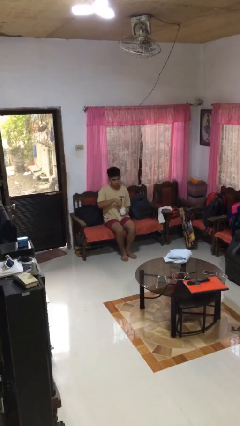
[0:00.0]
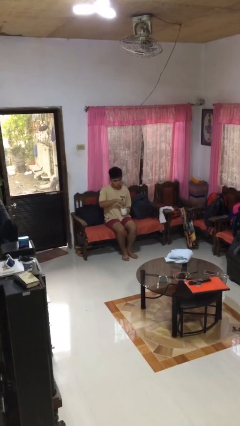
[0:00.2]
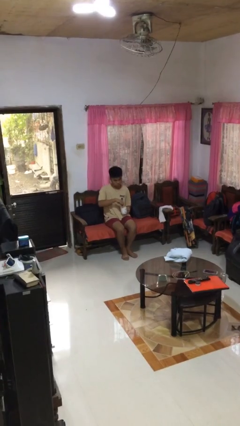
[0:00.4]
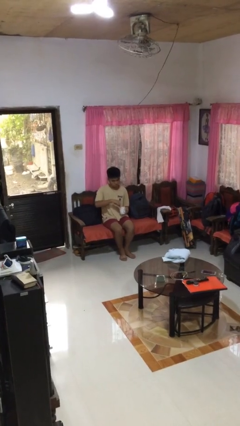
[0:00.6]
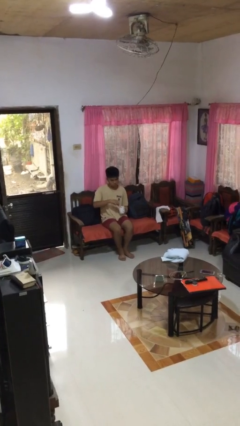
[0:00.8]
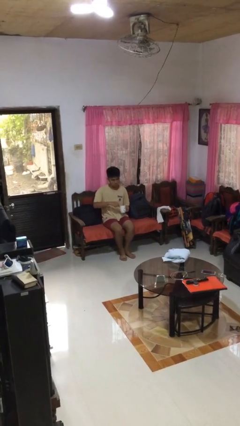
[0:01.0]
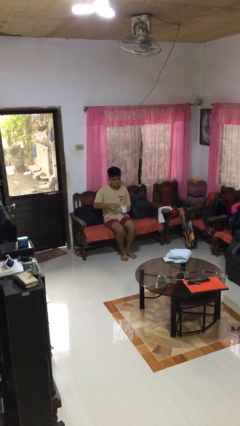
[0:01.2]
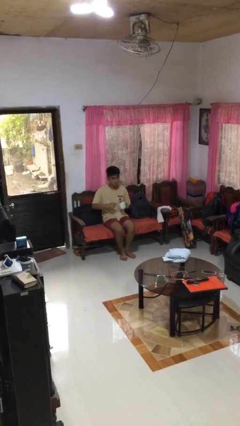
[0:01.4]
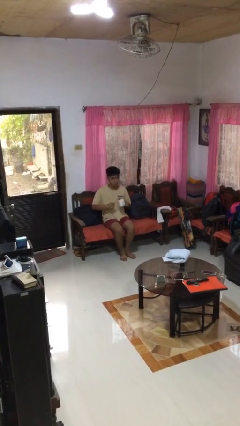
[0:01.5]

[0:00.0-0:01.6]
person stirs mug

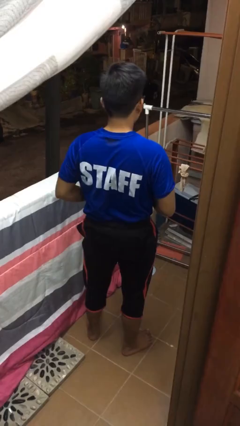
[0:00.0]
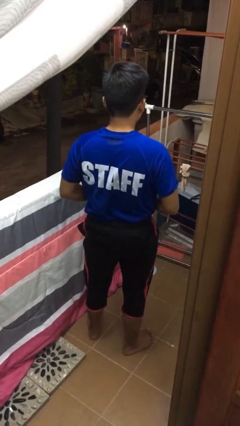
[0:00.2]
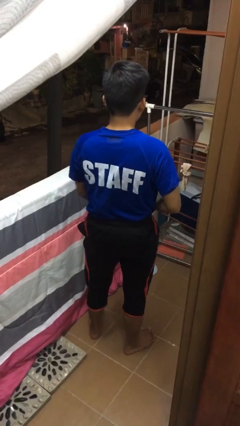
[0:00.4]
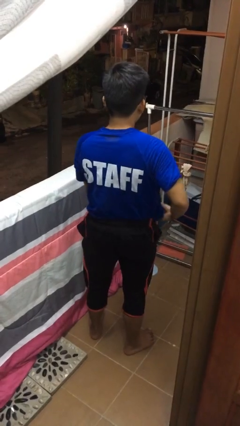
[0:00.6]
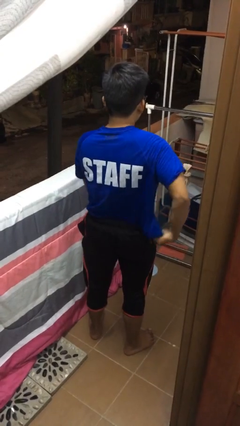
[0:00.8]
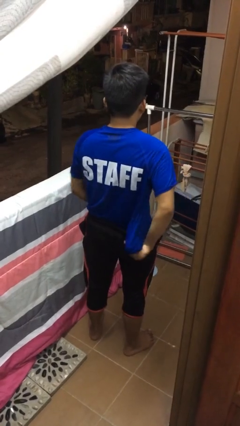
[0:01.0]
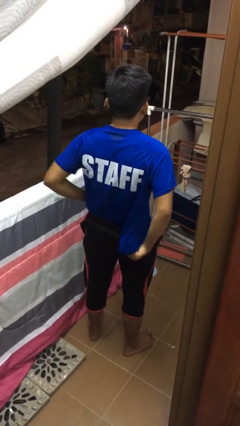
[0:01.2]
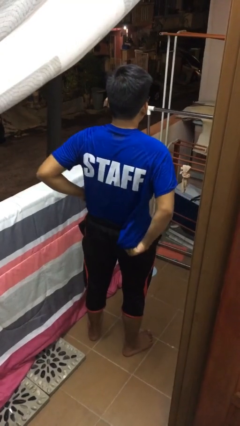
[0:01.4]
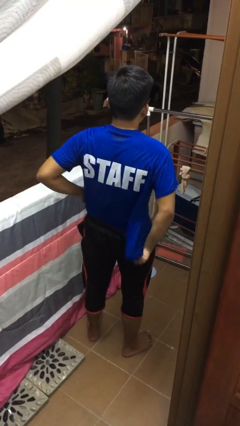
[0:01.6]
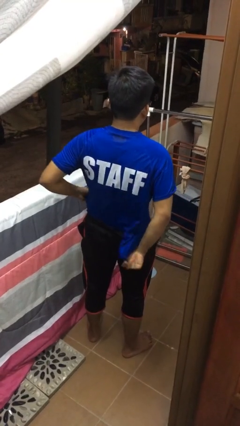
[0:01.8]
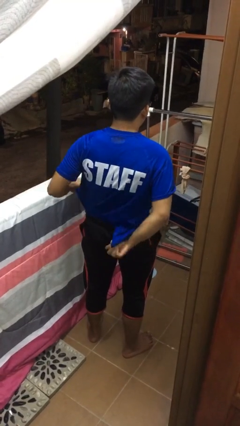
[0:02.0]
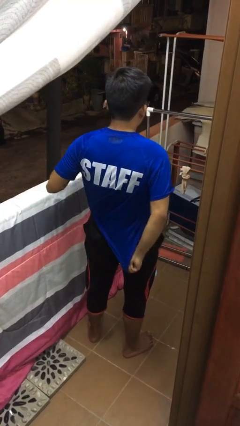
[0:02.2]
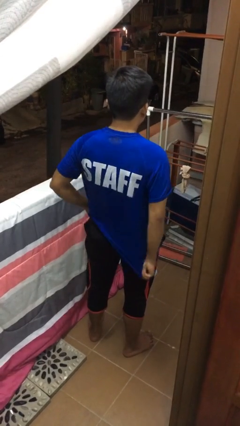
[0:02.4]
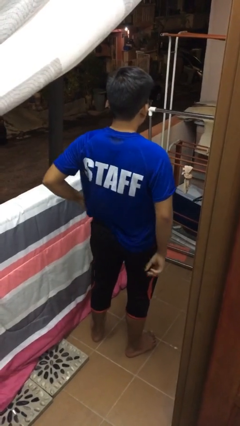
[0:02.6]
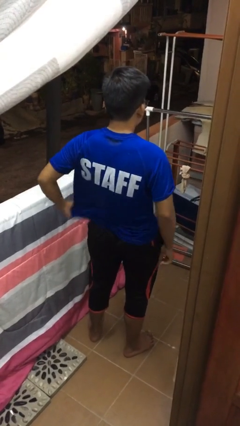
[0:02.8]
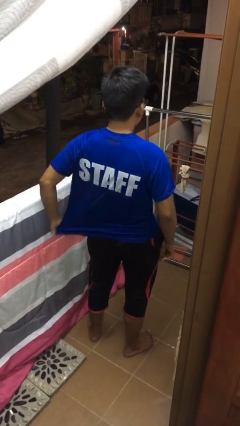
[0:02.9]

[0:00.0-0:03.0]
person untucks shirt

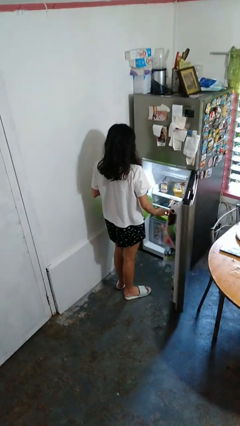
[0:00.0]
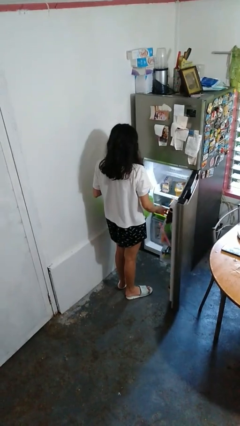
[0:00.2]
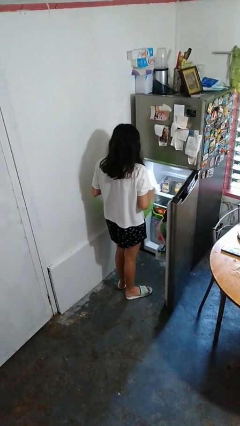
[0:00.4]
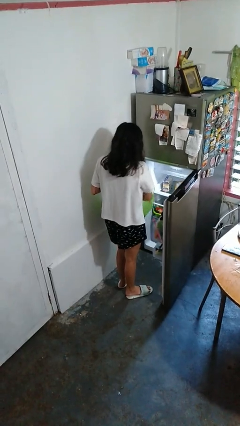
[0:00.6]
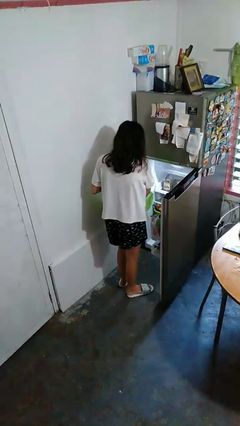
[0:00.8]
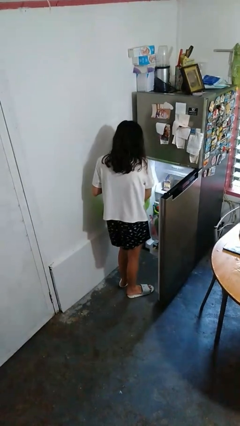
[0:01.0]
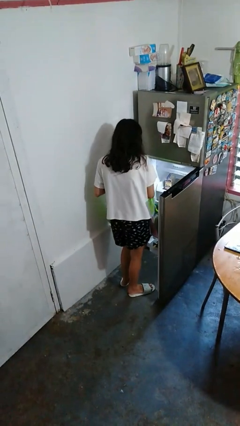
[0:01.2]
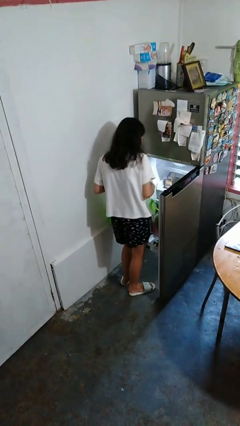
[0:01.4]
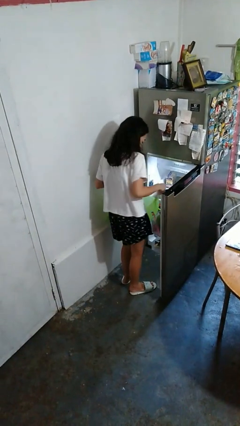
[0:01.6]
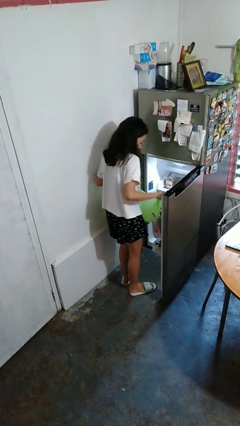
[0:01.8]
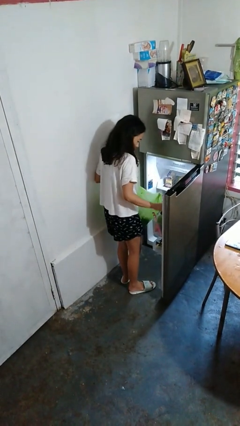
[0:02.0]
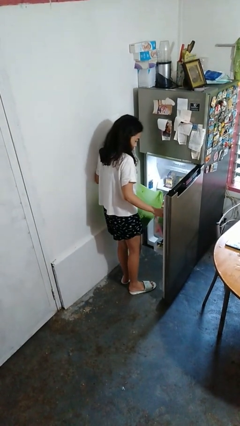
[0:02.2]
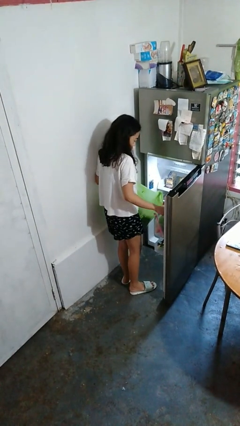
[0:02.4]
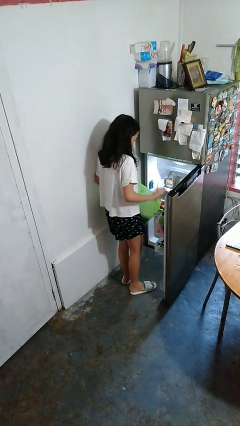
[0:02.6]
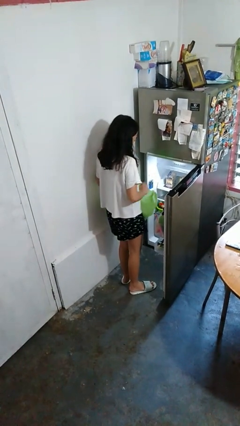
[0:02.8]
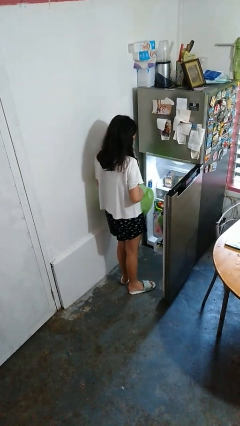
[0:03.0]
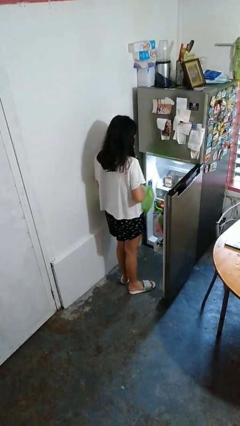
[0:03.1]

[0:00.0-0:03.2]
person loads groceries into refrigerator

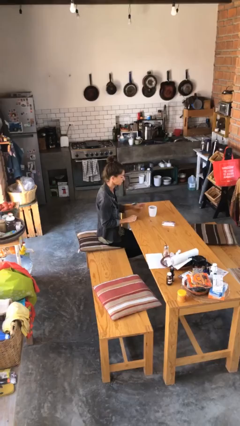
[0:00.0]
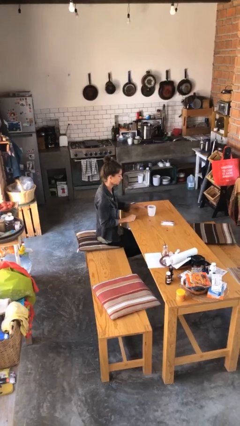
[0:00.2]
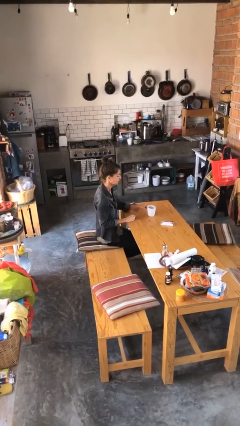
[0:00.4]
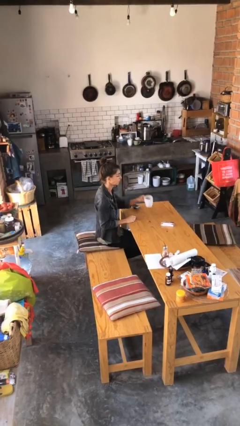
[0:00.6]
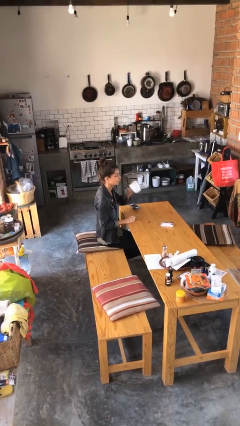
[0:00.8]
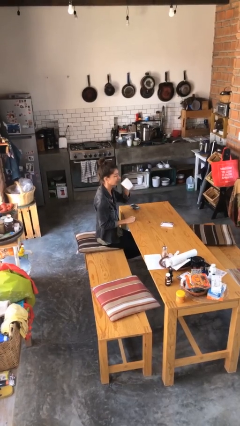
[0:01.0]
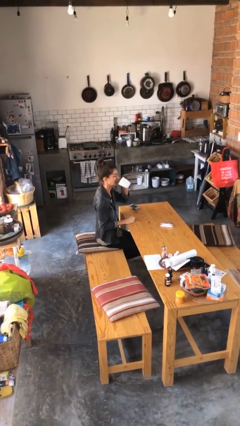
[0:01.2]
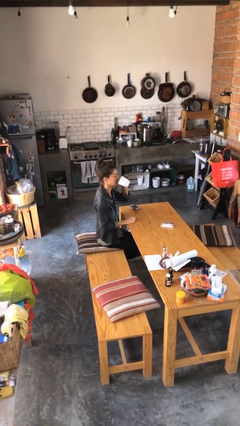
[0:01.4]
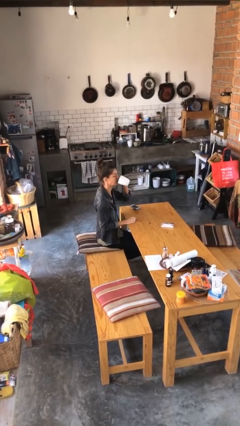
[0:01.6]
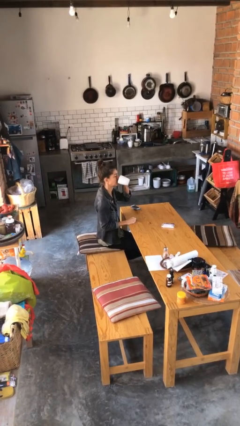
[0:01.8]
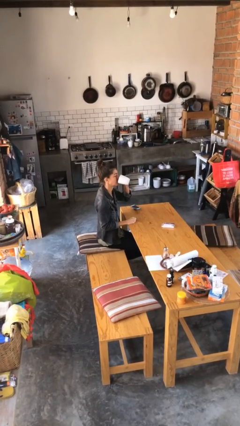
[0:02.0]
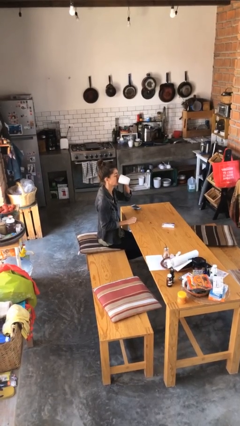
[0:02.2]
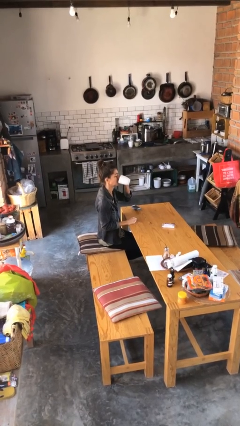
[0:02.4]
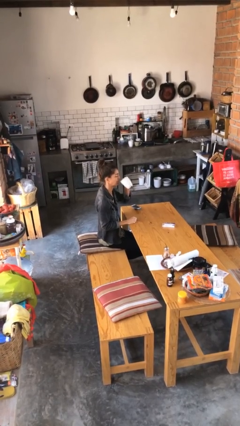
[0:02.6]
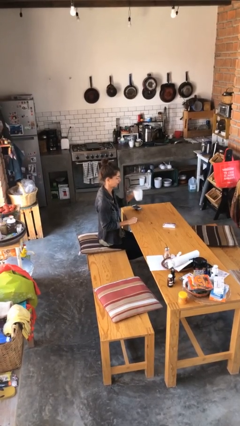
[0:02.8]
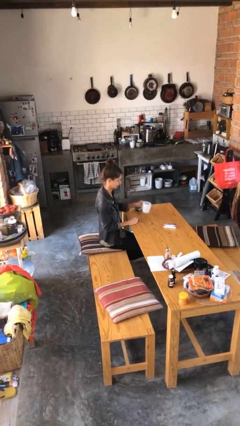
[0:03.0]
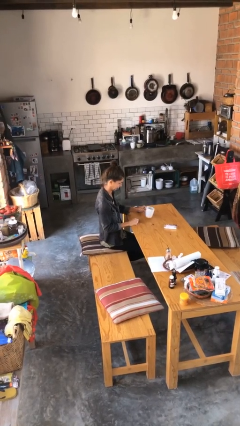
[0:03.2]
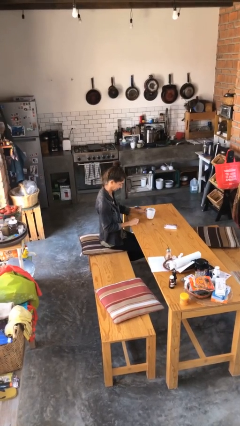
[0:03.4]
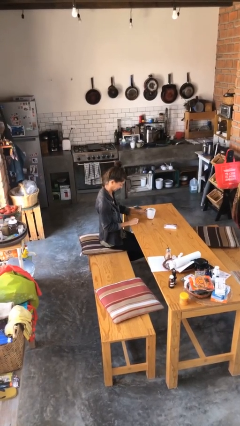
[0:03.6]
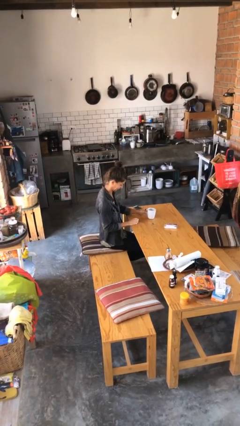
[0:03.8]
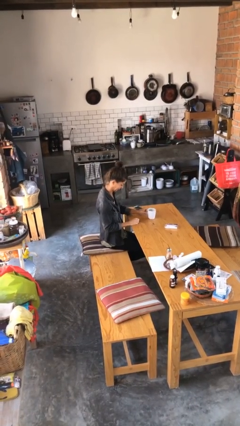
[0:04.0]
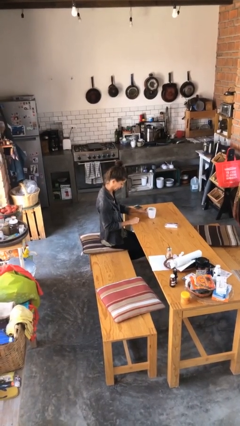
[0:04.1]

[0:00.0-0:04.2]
person drinks from cup

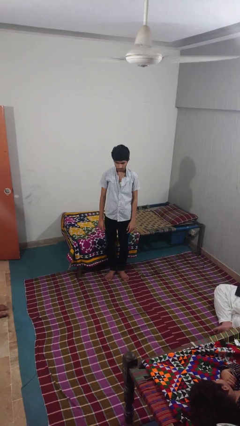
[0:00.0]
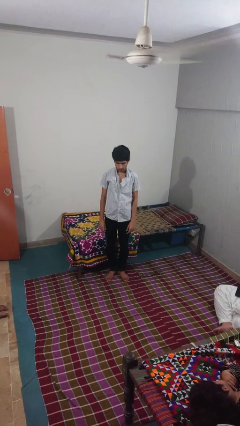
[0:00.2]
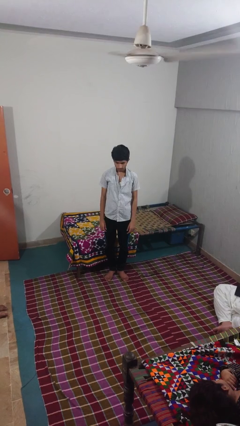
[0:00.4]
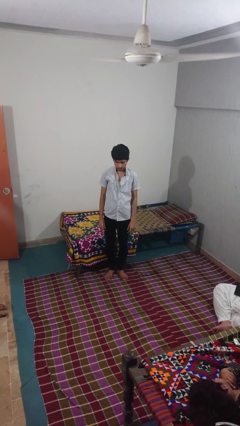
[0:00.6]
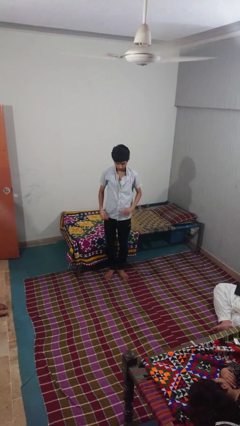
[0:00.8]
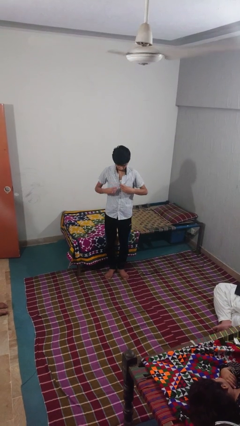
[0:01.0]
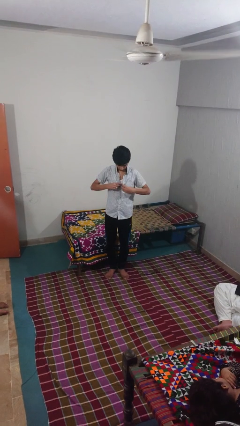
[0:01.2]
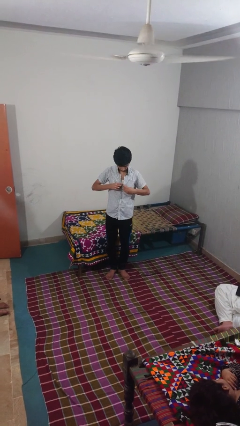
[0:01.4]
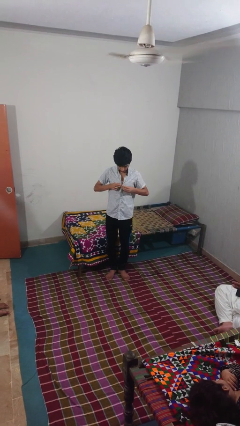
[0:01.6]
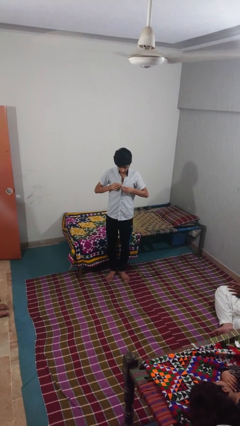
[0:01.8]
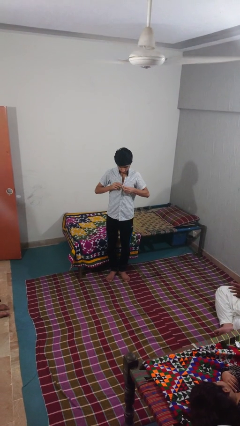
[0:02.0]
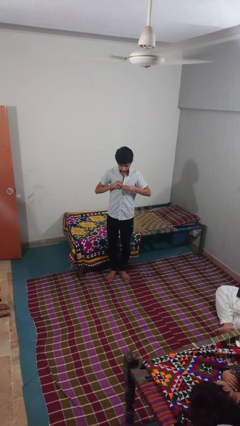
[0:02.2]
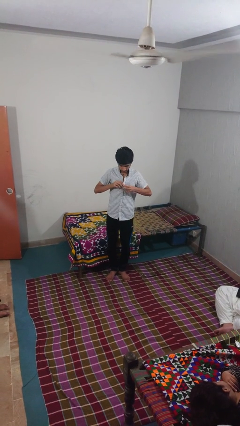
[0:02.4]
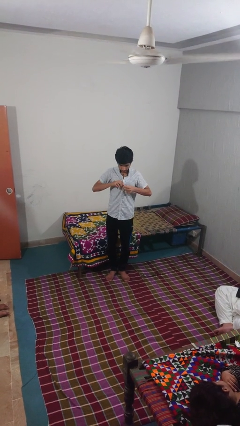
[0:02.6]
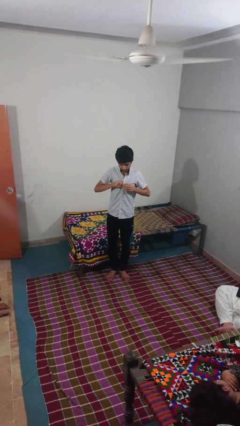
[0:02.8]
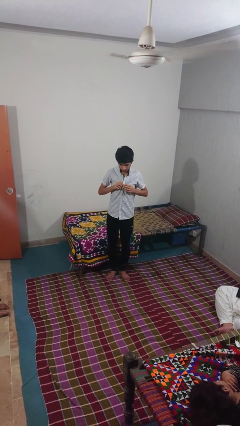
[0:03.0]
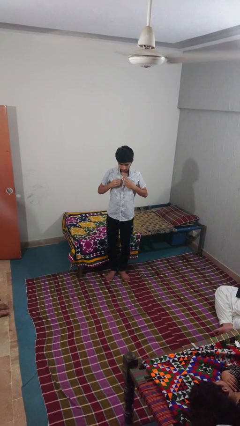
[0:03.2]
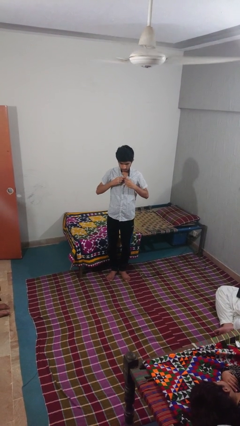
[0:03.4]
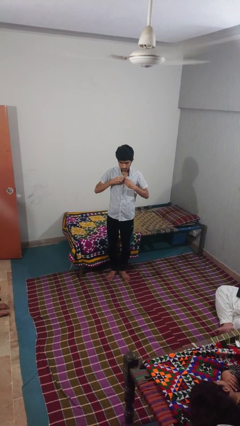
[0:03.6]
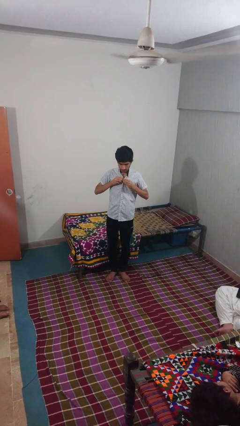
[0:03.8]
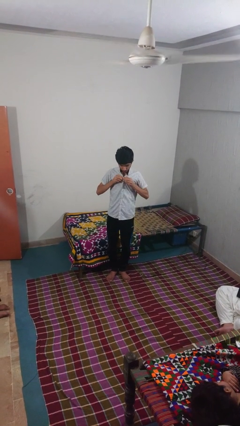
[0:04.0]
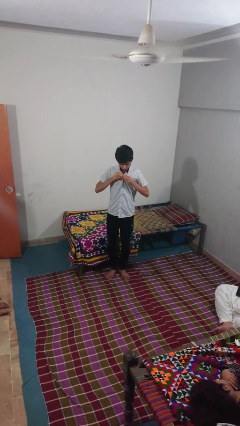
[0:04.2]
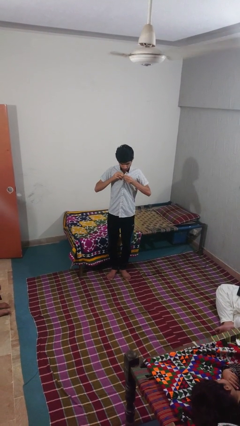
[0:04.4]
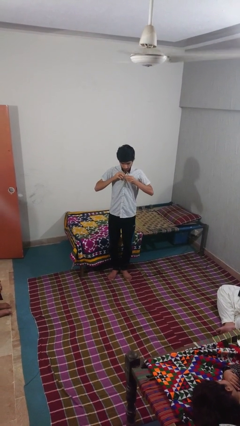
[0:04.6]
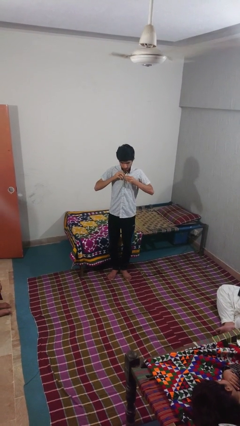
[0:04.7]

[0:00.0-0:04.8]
person buttons shirt

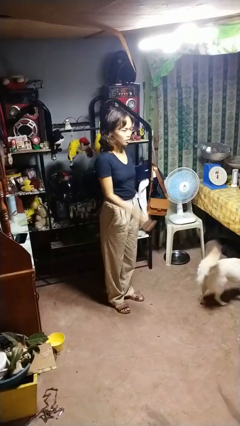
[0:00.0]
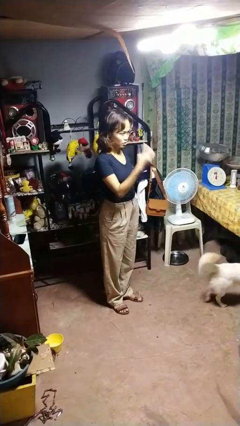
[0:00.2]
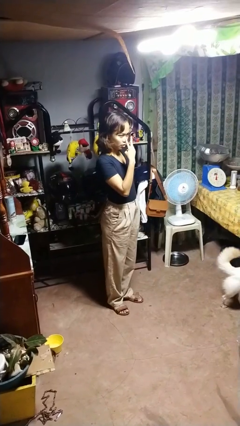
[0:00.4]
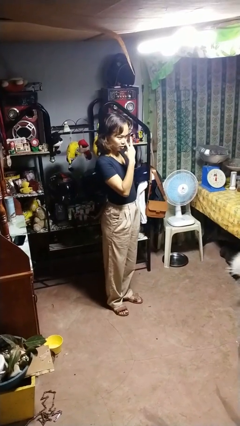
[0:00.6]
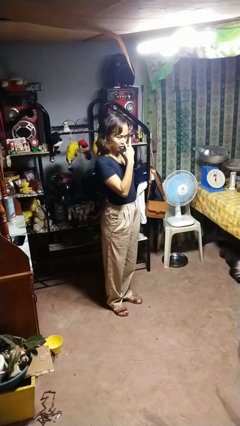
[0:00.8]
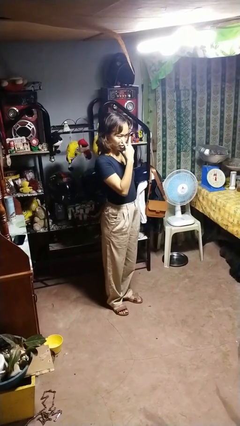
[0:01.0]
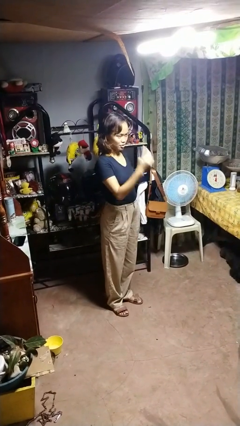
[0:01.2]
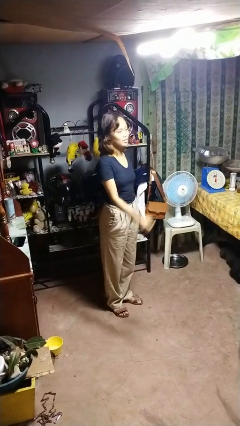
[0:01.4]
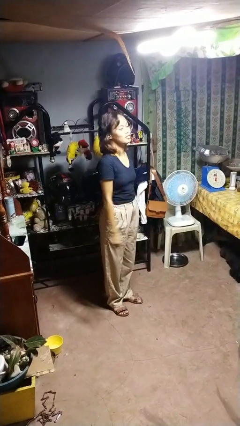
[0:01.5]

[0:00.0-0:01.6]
person gestures watch closely
